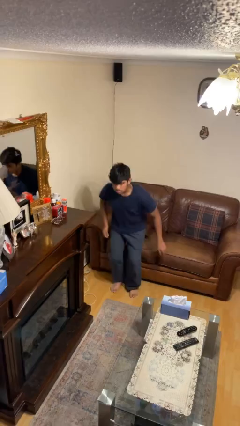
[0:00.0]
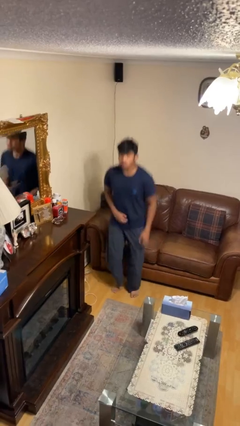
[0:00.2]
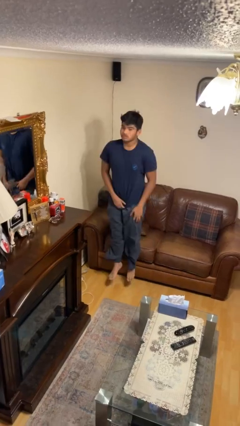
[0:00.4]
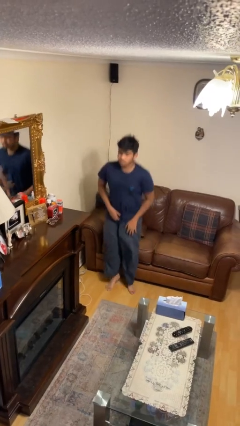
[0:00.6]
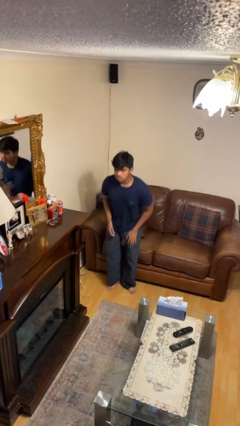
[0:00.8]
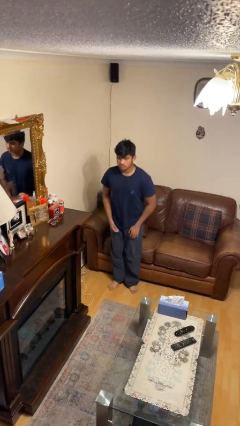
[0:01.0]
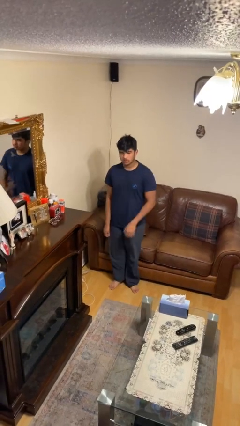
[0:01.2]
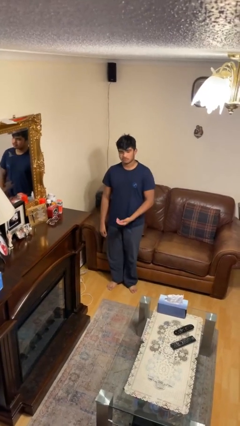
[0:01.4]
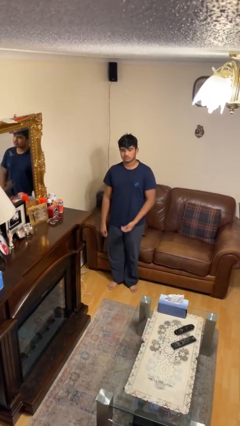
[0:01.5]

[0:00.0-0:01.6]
person jumps

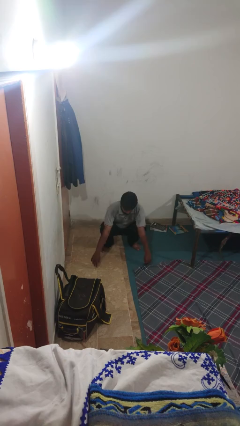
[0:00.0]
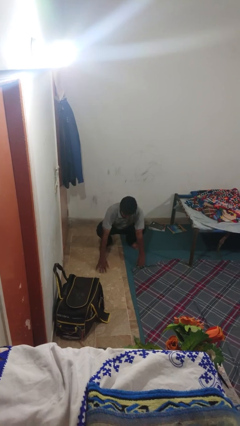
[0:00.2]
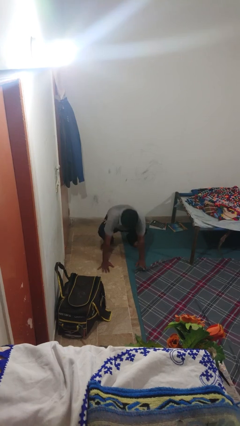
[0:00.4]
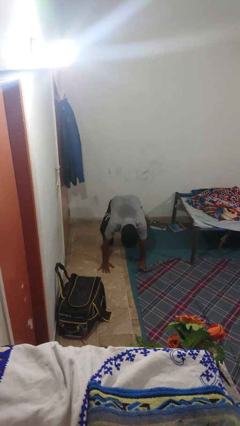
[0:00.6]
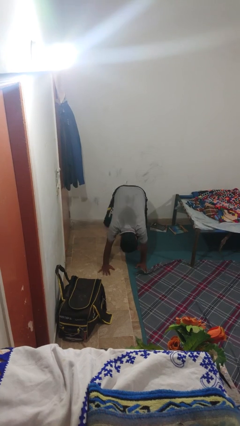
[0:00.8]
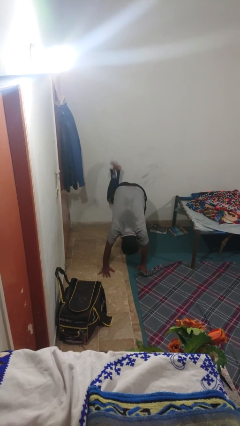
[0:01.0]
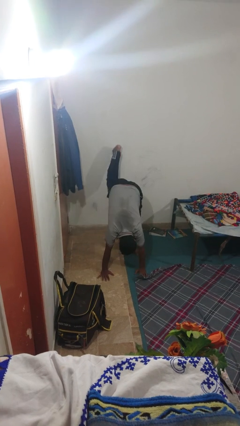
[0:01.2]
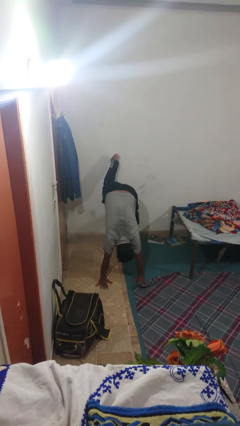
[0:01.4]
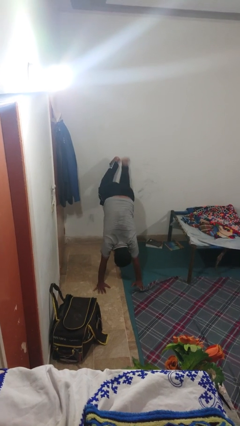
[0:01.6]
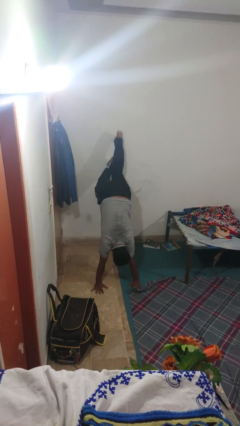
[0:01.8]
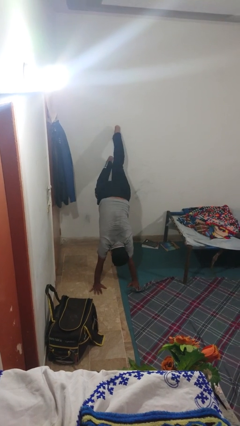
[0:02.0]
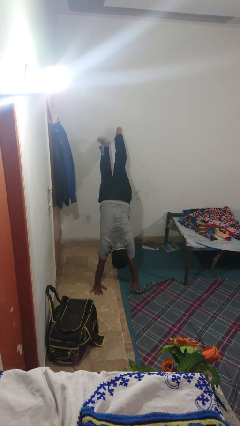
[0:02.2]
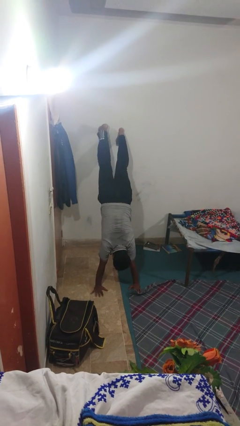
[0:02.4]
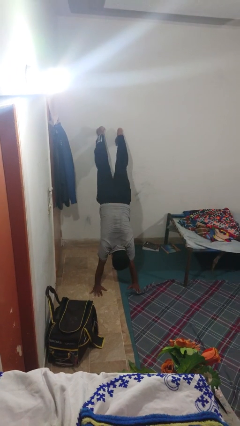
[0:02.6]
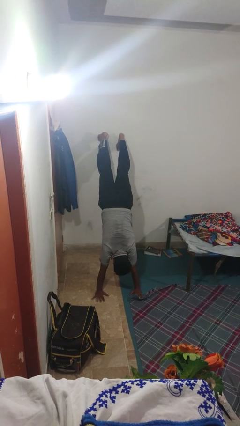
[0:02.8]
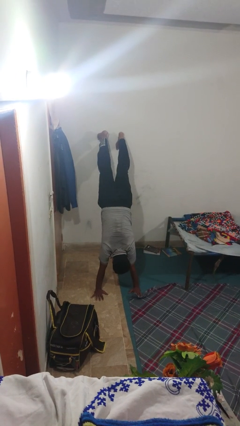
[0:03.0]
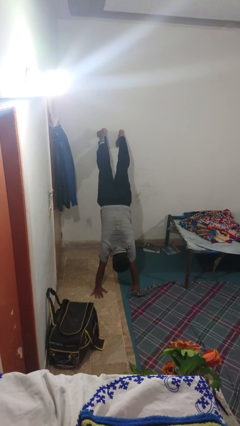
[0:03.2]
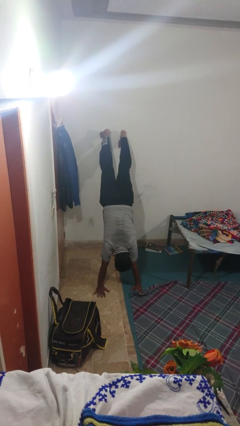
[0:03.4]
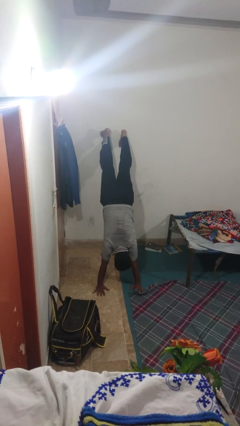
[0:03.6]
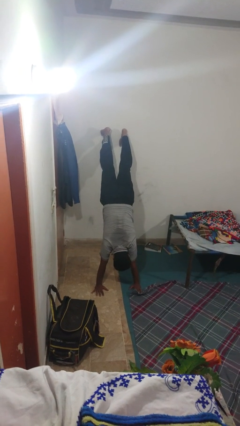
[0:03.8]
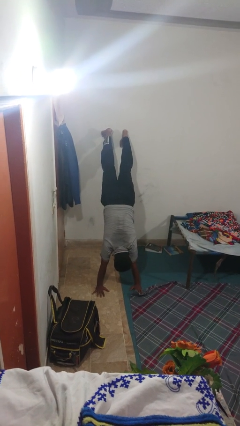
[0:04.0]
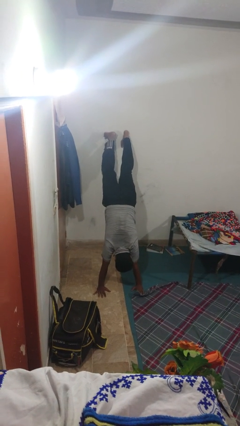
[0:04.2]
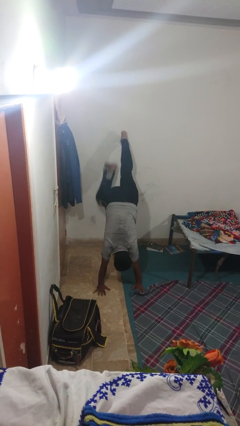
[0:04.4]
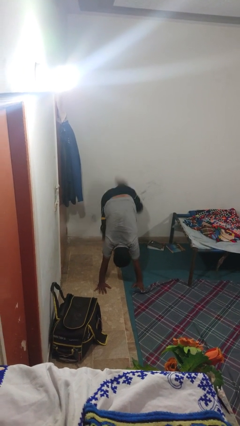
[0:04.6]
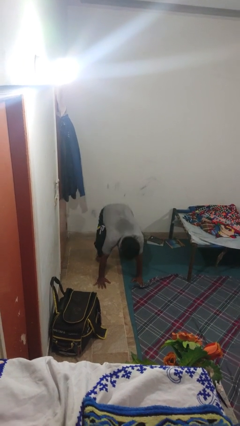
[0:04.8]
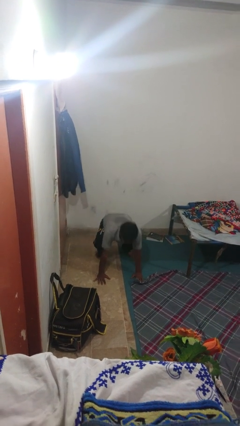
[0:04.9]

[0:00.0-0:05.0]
person handstand

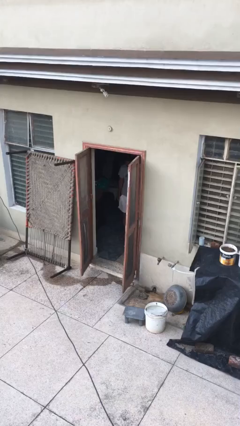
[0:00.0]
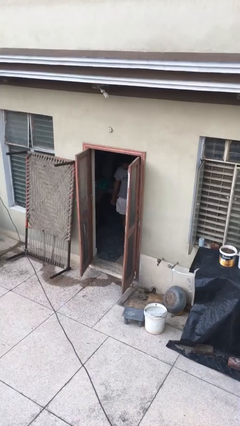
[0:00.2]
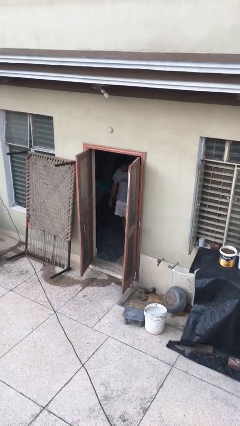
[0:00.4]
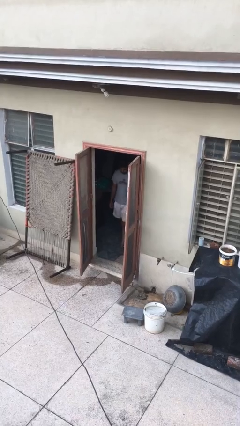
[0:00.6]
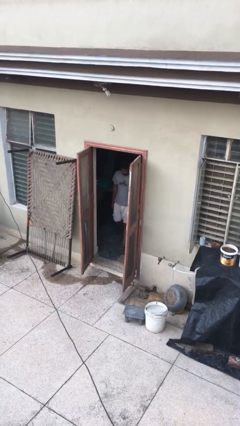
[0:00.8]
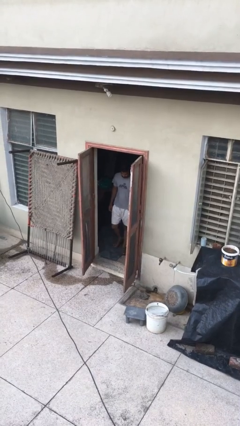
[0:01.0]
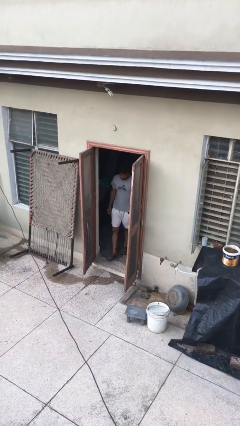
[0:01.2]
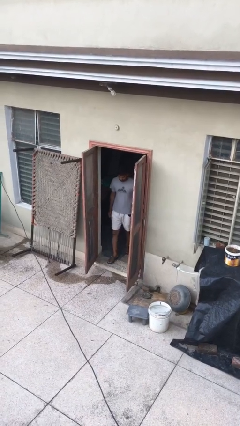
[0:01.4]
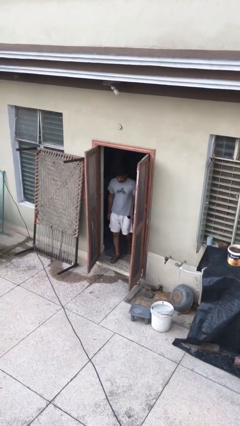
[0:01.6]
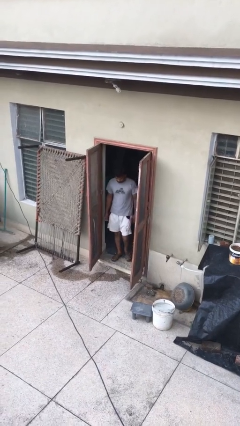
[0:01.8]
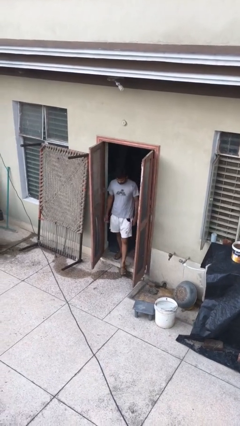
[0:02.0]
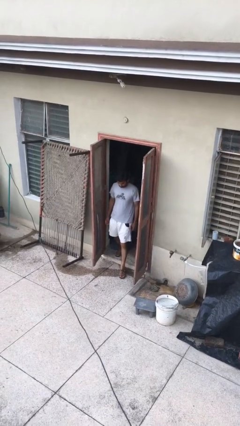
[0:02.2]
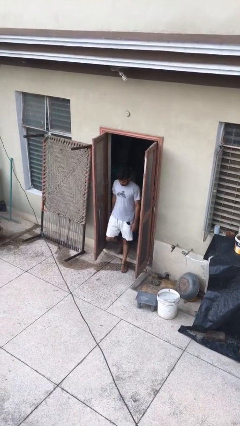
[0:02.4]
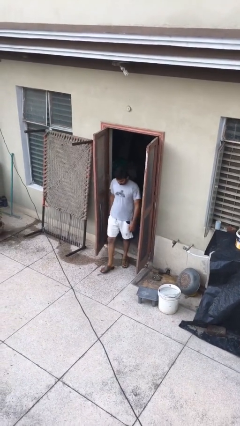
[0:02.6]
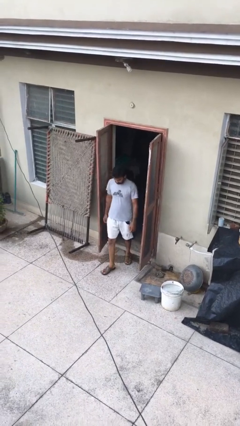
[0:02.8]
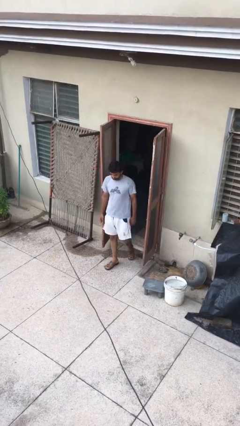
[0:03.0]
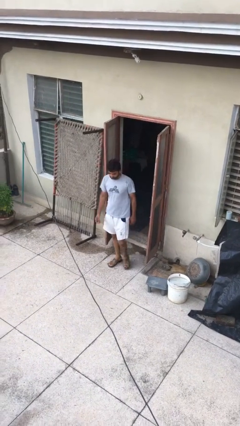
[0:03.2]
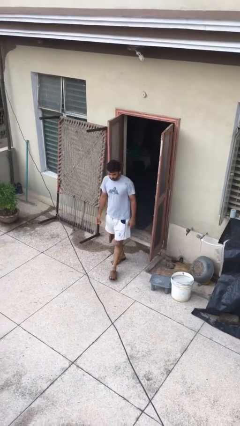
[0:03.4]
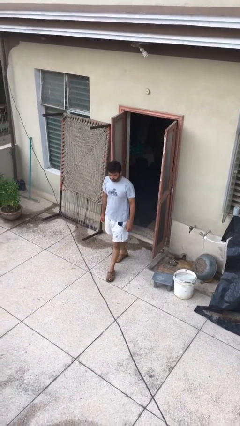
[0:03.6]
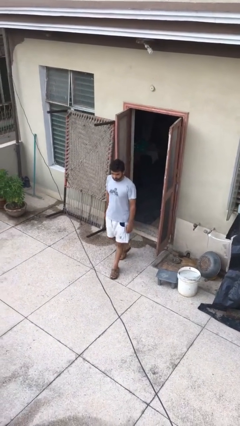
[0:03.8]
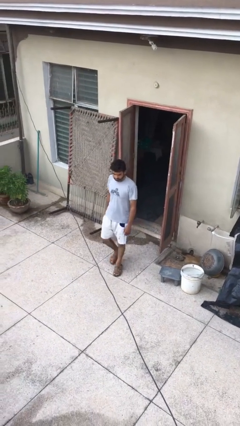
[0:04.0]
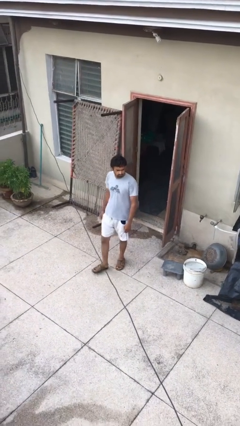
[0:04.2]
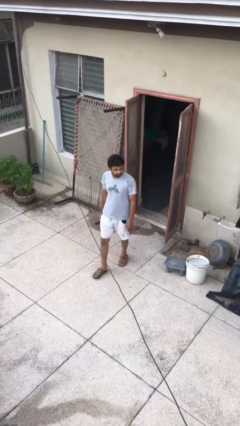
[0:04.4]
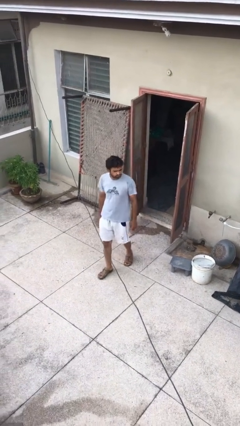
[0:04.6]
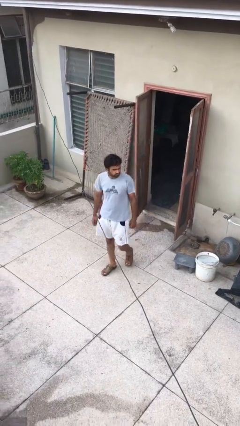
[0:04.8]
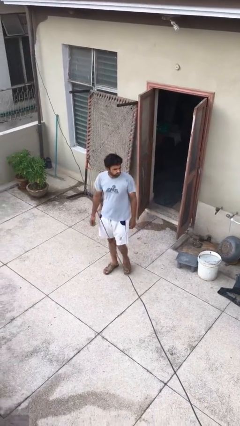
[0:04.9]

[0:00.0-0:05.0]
person enters scene through structure

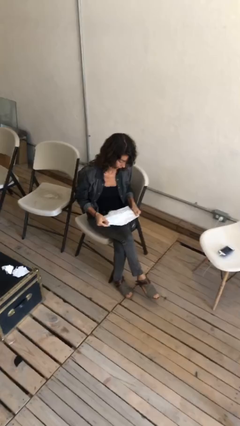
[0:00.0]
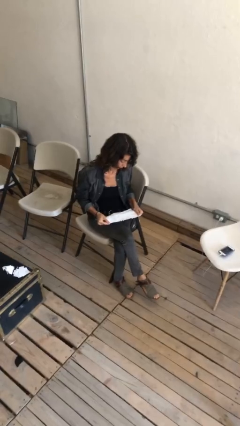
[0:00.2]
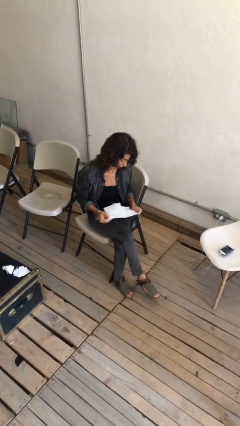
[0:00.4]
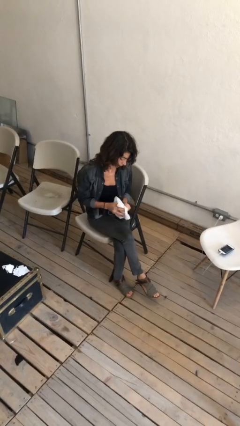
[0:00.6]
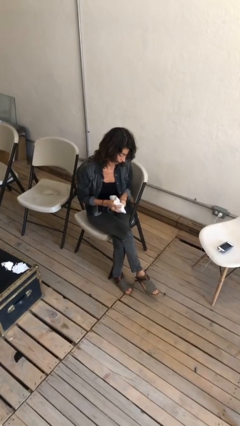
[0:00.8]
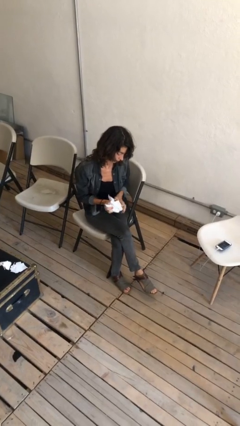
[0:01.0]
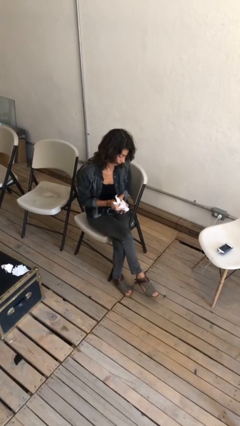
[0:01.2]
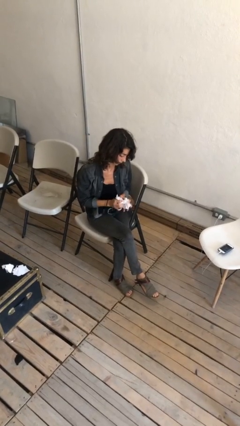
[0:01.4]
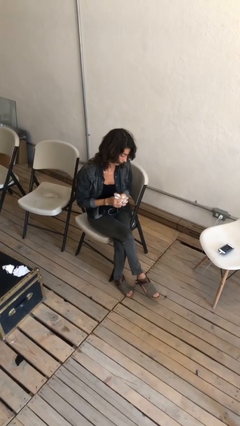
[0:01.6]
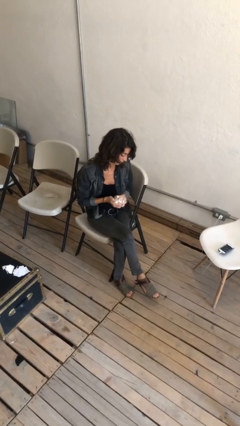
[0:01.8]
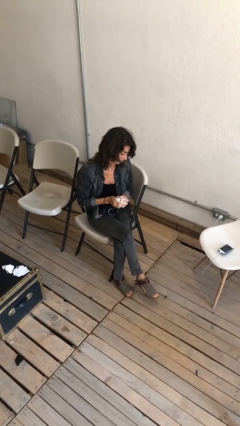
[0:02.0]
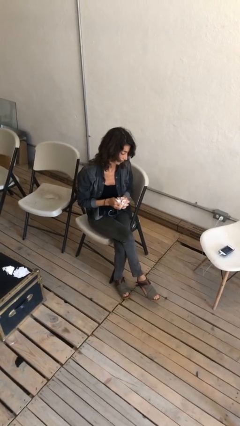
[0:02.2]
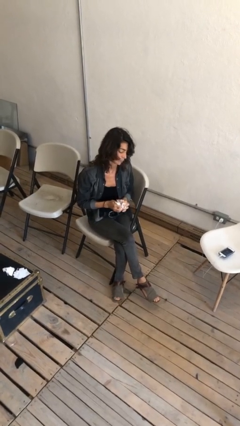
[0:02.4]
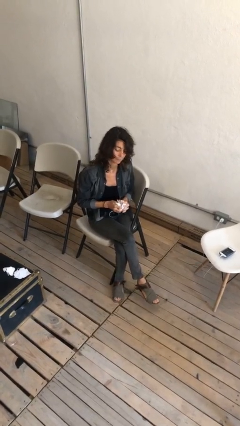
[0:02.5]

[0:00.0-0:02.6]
person crumples paper

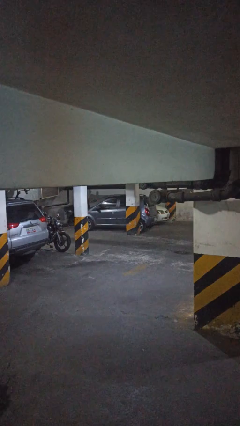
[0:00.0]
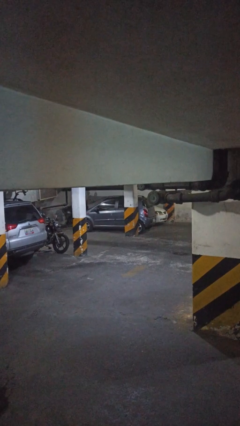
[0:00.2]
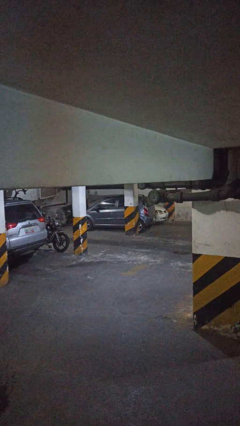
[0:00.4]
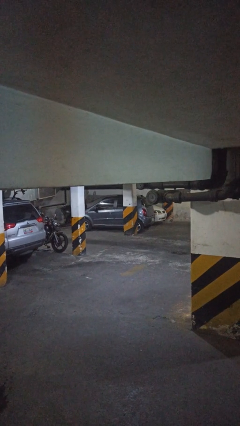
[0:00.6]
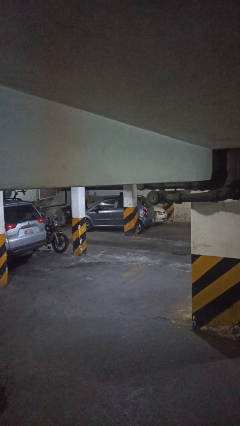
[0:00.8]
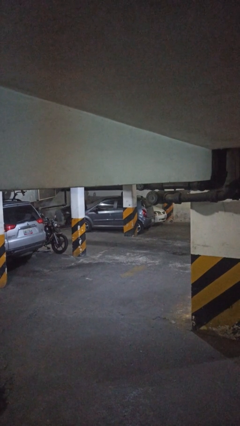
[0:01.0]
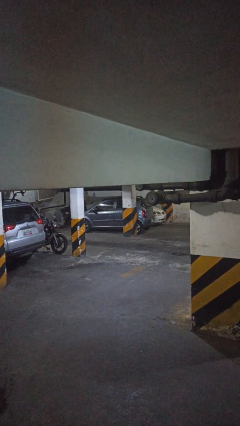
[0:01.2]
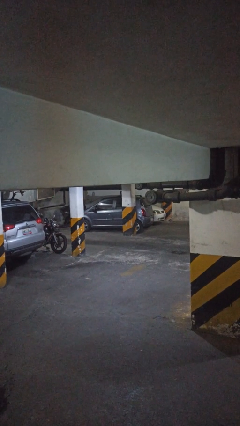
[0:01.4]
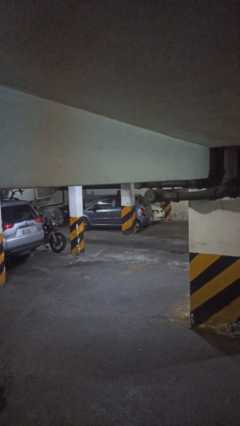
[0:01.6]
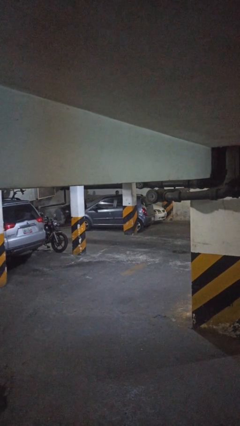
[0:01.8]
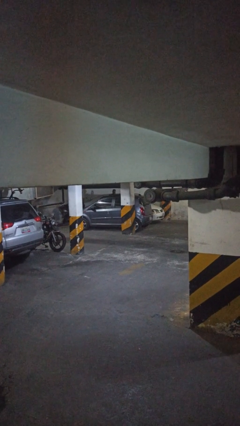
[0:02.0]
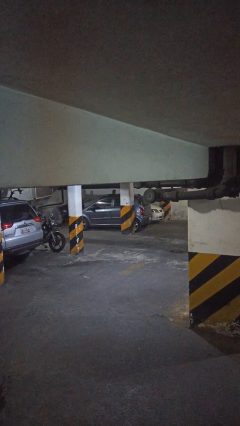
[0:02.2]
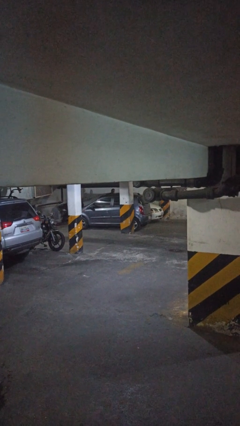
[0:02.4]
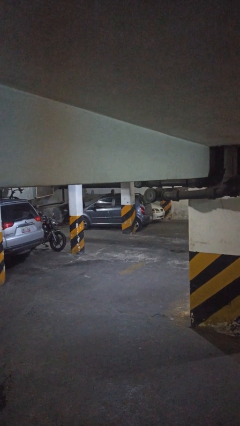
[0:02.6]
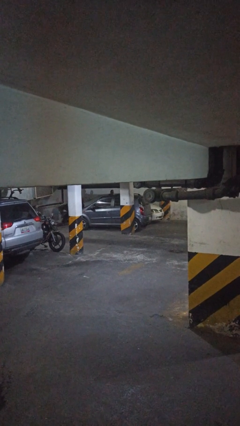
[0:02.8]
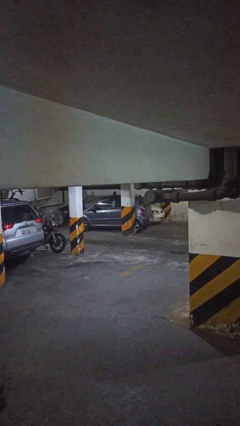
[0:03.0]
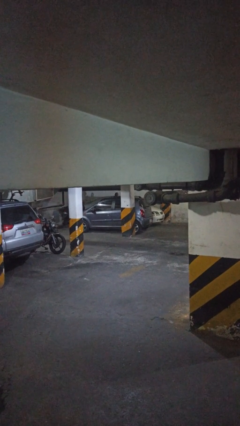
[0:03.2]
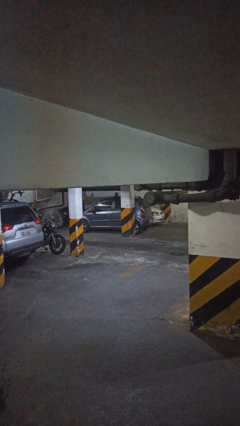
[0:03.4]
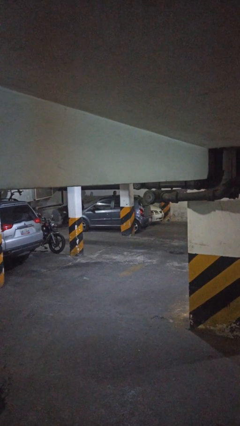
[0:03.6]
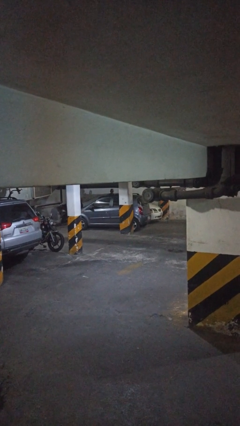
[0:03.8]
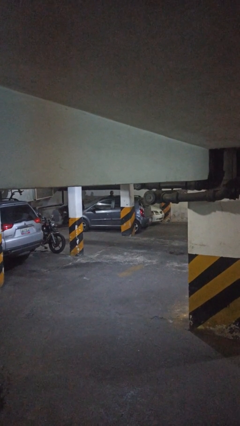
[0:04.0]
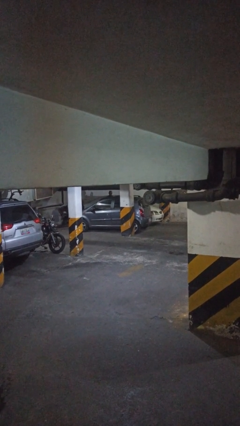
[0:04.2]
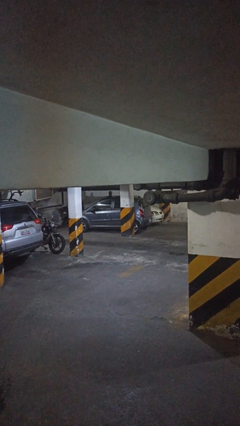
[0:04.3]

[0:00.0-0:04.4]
car drops off person
